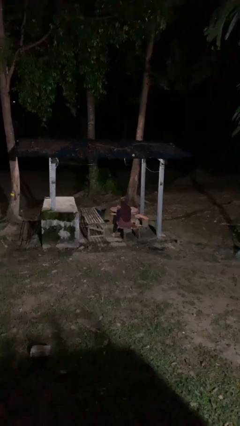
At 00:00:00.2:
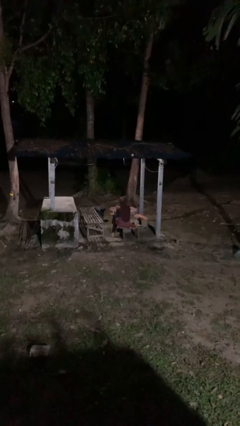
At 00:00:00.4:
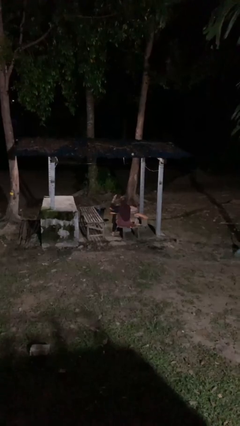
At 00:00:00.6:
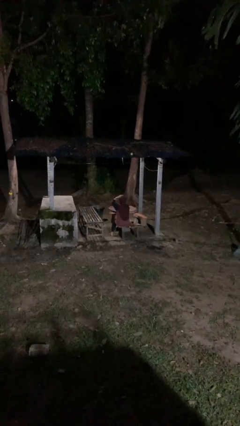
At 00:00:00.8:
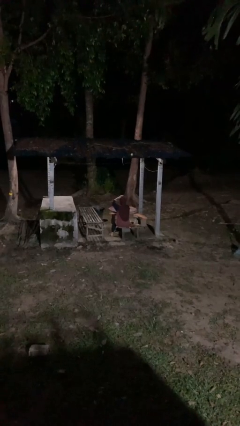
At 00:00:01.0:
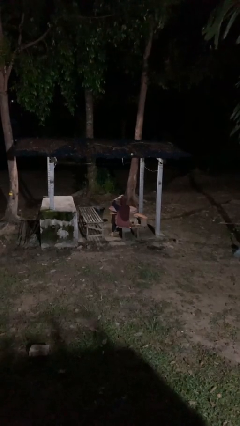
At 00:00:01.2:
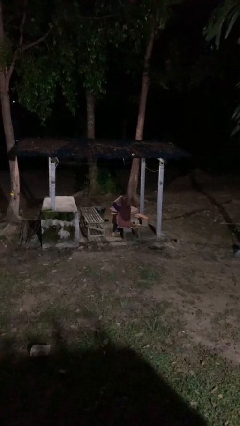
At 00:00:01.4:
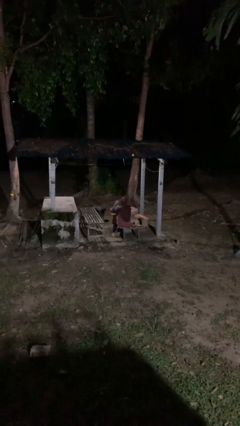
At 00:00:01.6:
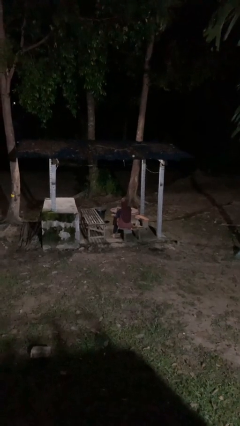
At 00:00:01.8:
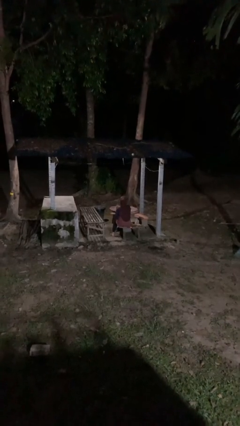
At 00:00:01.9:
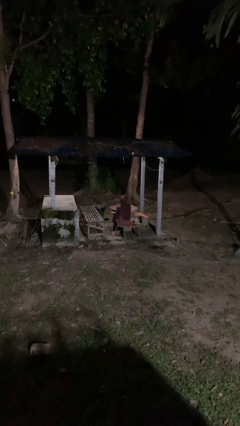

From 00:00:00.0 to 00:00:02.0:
person pats head

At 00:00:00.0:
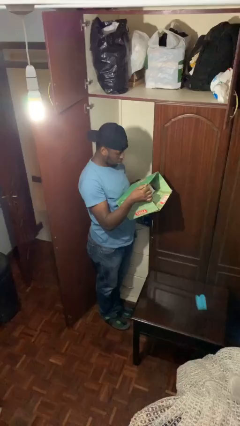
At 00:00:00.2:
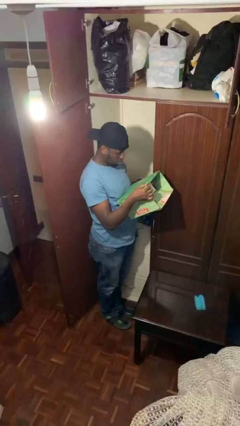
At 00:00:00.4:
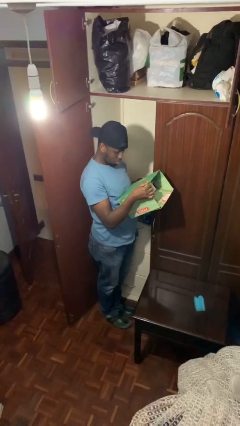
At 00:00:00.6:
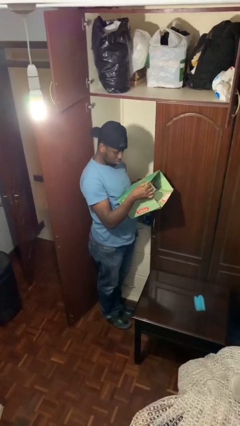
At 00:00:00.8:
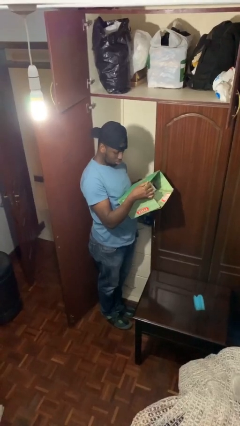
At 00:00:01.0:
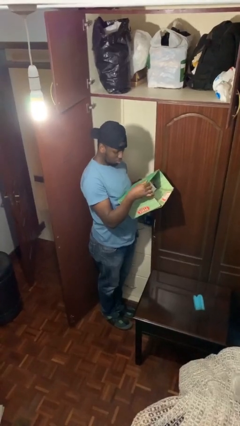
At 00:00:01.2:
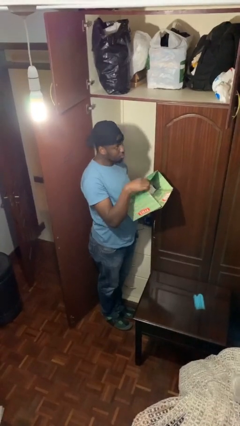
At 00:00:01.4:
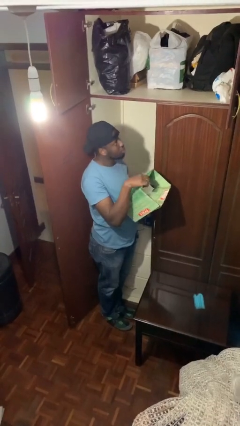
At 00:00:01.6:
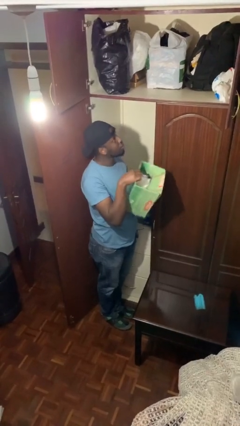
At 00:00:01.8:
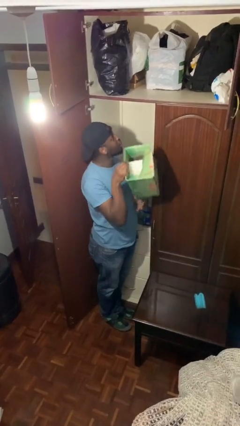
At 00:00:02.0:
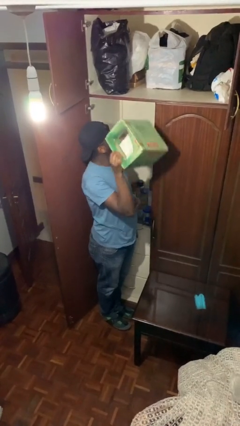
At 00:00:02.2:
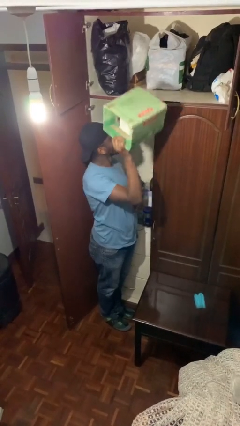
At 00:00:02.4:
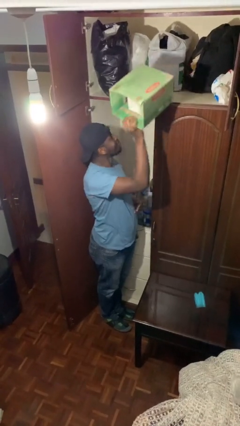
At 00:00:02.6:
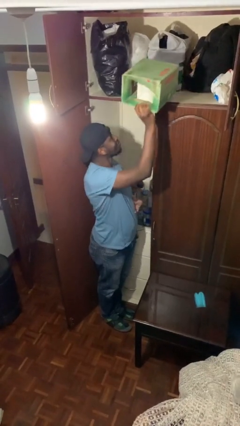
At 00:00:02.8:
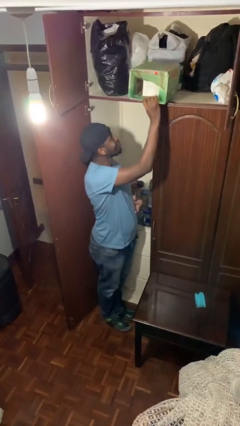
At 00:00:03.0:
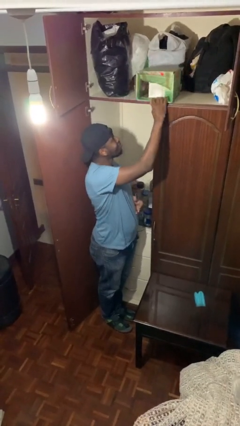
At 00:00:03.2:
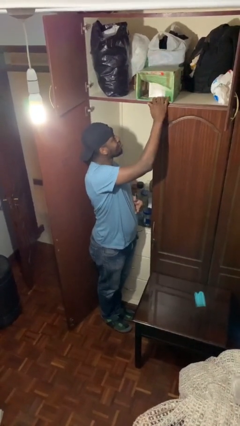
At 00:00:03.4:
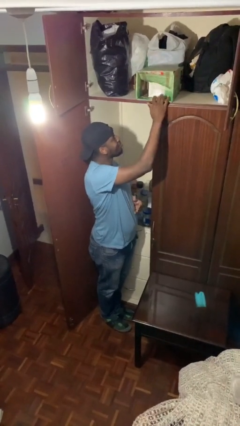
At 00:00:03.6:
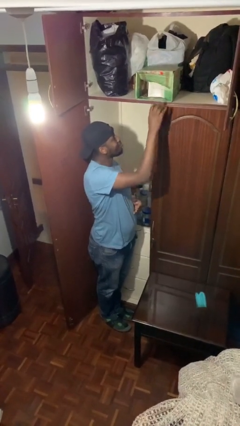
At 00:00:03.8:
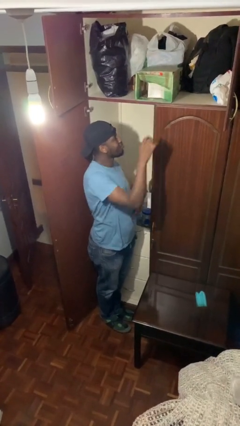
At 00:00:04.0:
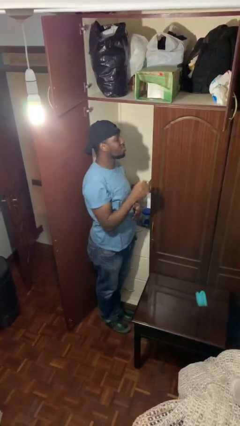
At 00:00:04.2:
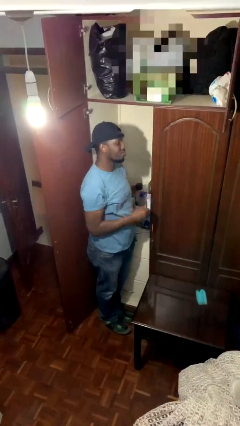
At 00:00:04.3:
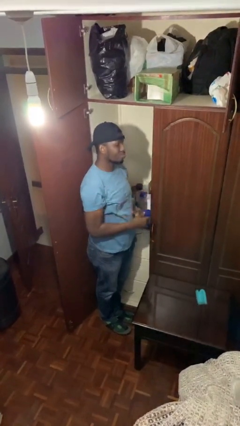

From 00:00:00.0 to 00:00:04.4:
person puts down object on shelf

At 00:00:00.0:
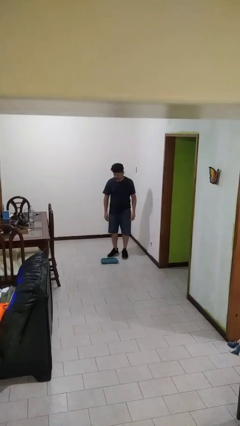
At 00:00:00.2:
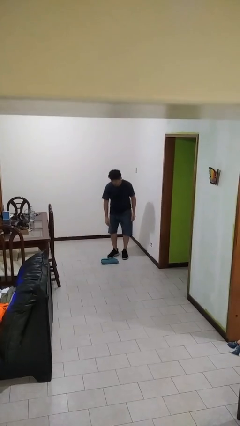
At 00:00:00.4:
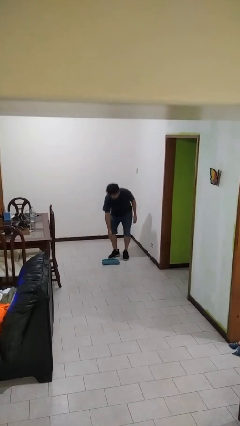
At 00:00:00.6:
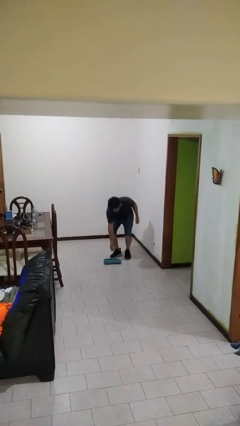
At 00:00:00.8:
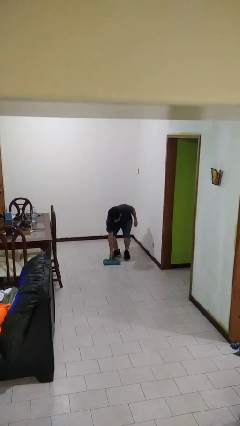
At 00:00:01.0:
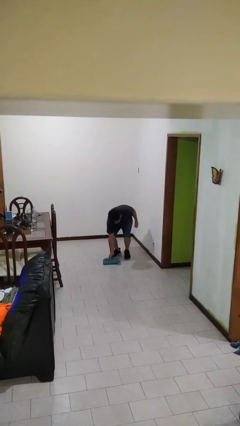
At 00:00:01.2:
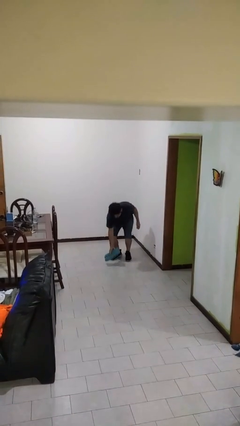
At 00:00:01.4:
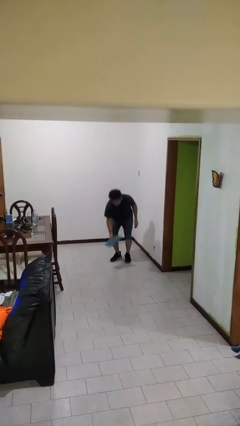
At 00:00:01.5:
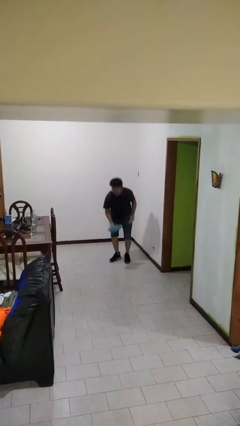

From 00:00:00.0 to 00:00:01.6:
person picks up object from floor

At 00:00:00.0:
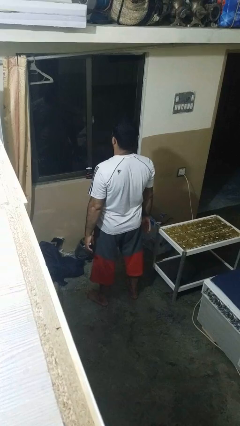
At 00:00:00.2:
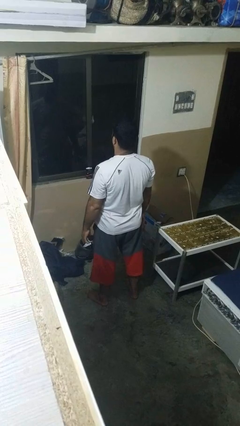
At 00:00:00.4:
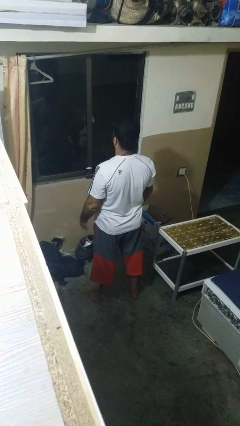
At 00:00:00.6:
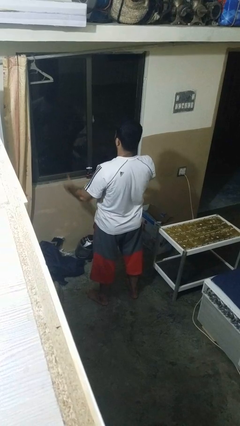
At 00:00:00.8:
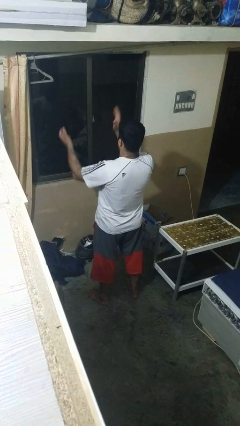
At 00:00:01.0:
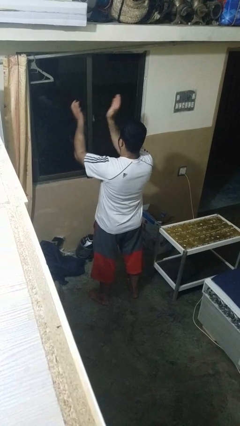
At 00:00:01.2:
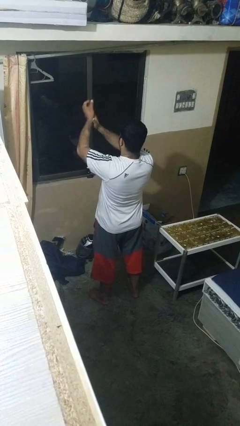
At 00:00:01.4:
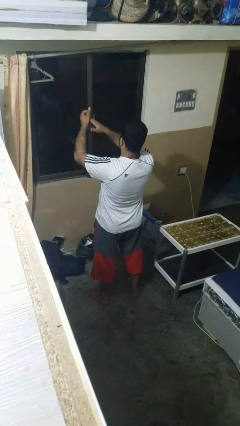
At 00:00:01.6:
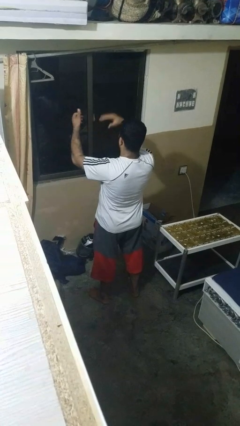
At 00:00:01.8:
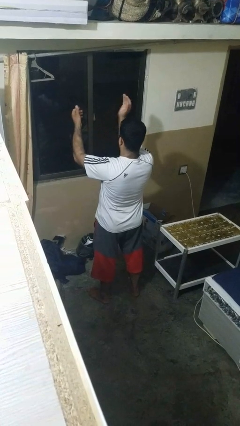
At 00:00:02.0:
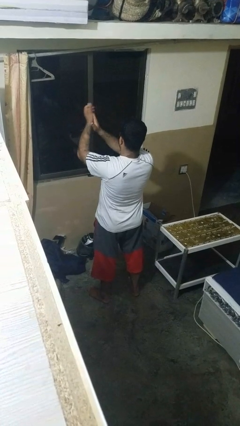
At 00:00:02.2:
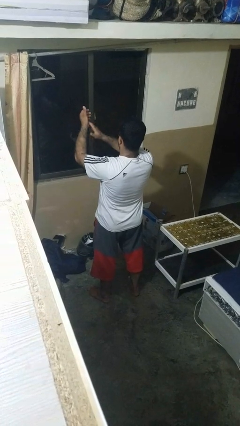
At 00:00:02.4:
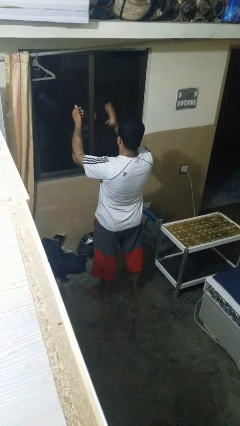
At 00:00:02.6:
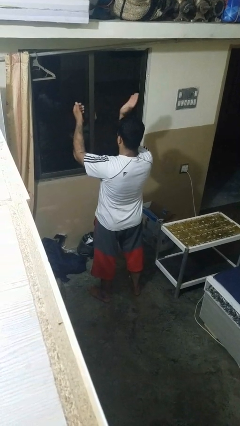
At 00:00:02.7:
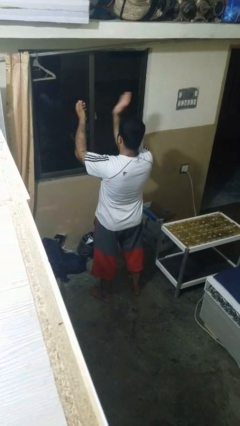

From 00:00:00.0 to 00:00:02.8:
person claps hands

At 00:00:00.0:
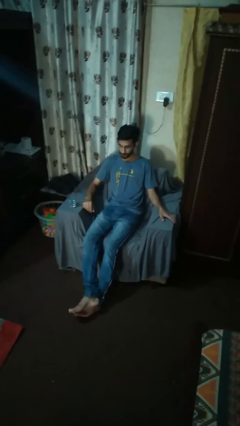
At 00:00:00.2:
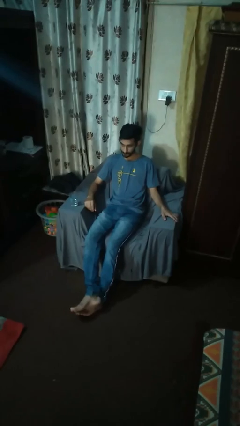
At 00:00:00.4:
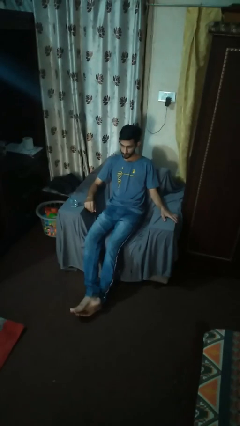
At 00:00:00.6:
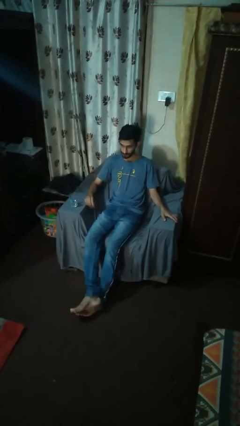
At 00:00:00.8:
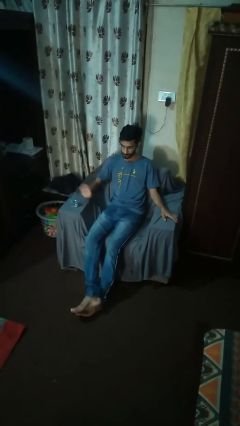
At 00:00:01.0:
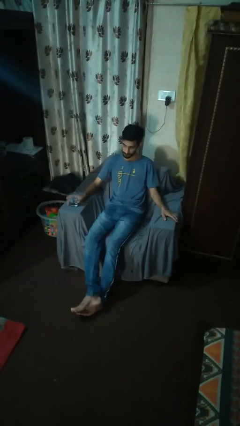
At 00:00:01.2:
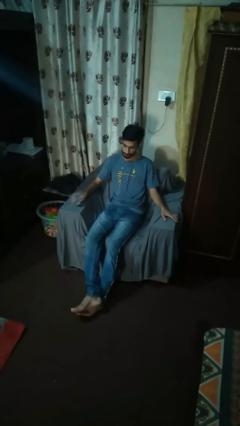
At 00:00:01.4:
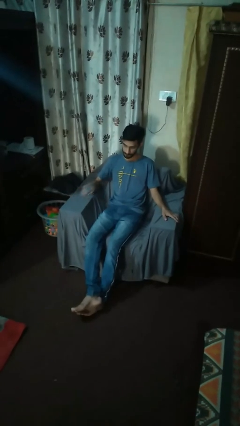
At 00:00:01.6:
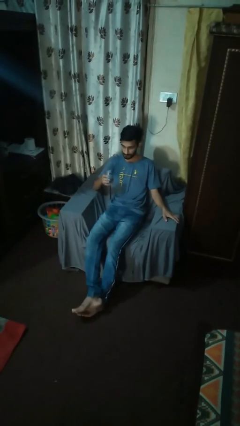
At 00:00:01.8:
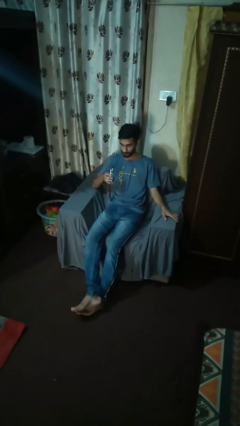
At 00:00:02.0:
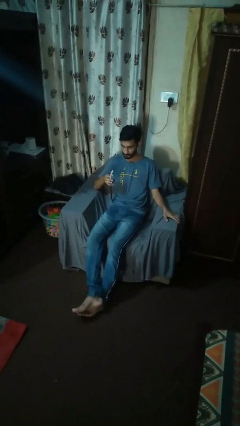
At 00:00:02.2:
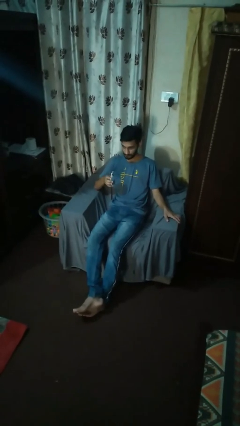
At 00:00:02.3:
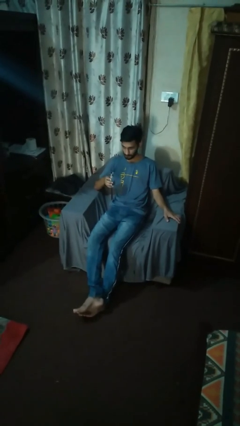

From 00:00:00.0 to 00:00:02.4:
person picks up object from table

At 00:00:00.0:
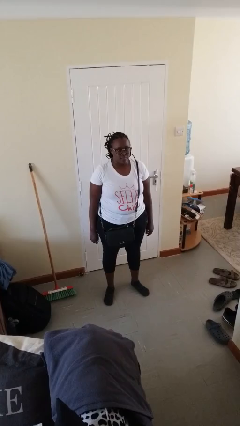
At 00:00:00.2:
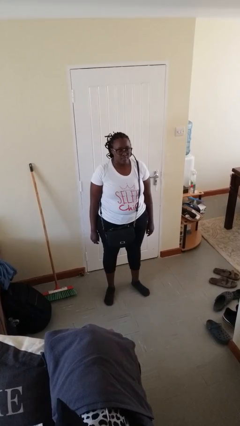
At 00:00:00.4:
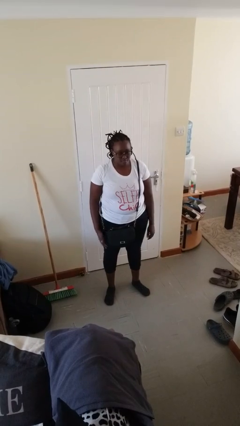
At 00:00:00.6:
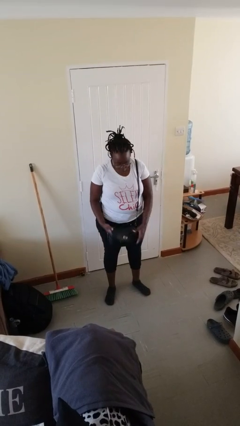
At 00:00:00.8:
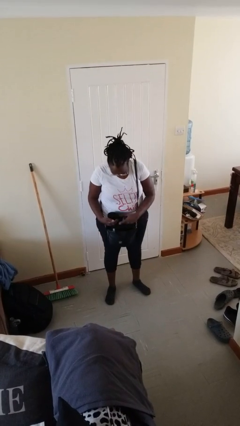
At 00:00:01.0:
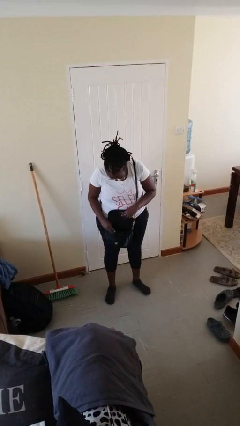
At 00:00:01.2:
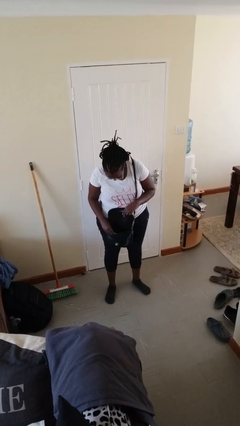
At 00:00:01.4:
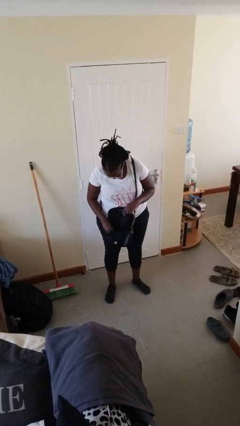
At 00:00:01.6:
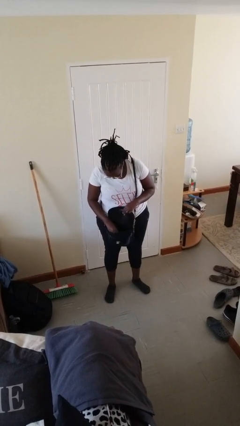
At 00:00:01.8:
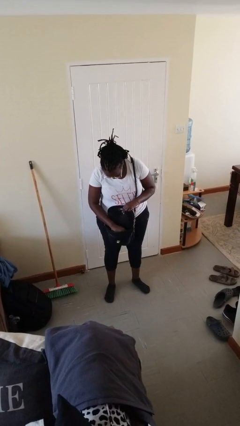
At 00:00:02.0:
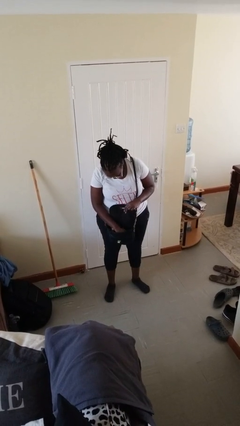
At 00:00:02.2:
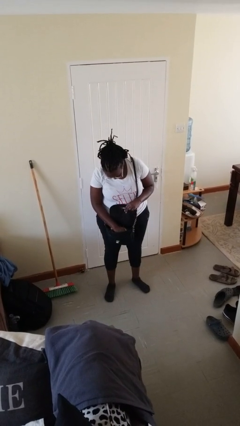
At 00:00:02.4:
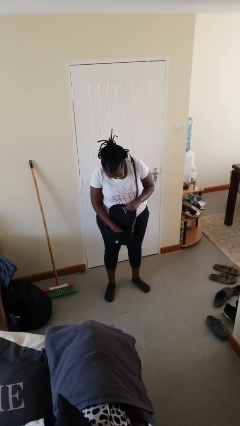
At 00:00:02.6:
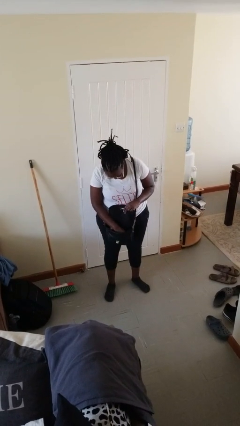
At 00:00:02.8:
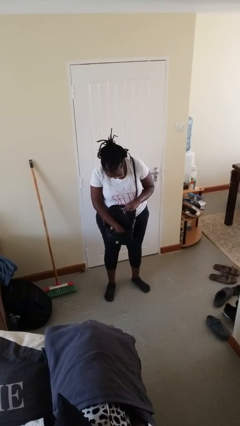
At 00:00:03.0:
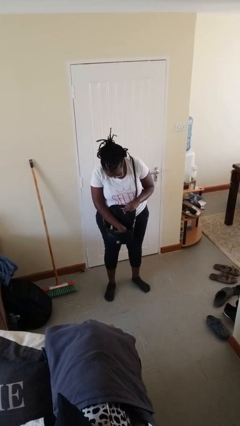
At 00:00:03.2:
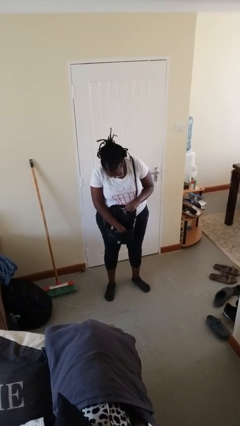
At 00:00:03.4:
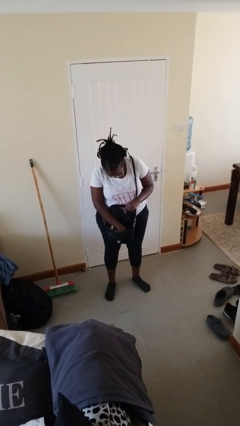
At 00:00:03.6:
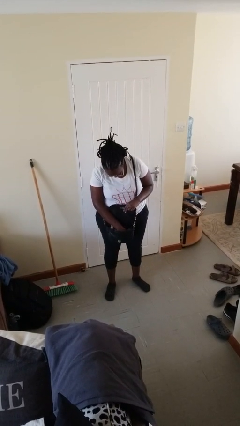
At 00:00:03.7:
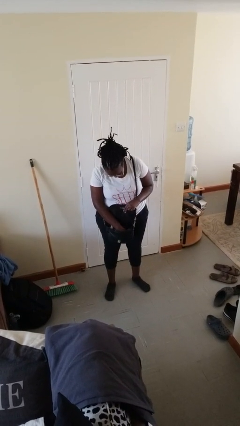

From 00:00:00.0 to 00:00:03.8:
person searches in purse

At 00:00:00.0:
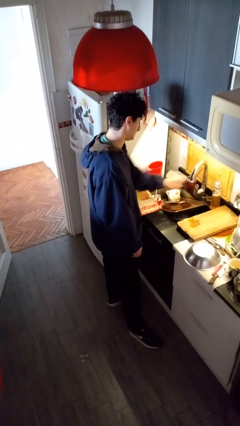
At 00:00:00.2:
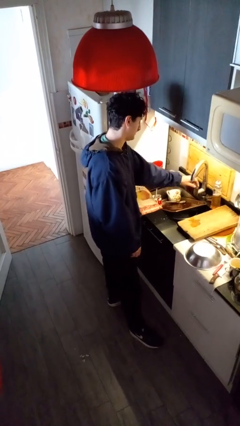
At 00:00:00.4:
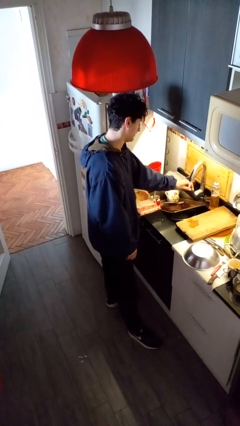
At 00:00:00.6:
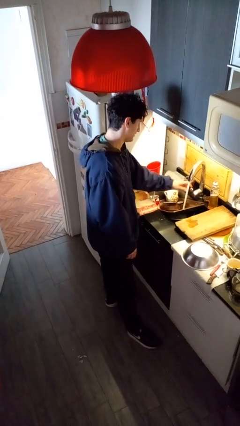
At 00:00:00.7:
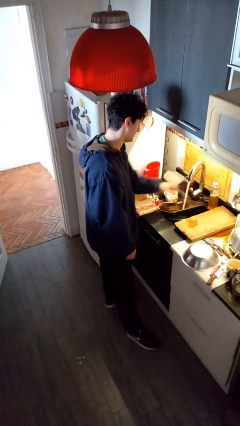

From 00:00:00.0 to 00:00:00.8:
person turns on faucet
